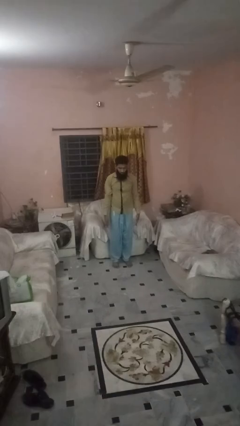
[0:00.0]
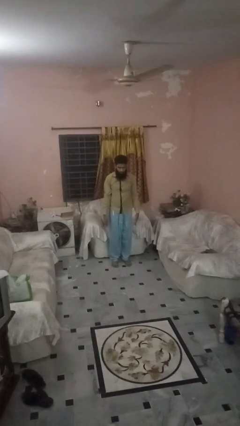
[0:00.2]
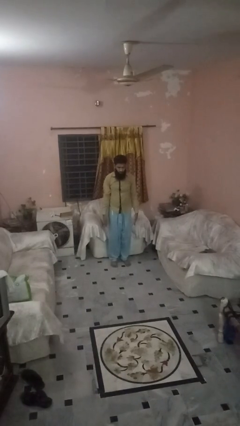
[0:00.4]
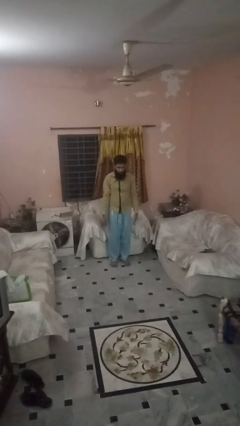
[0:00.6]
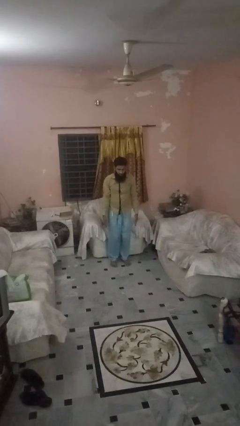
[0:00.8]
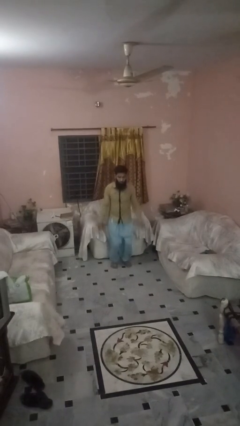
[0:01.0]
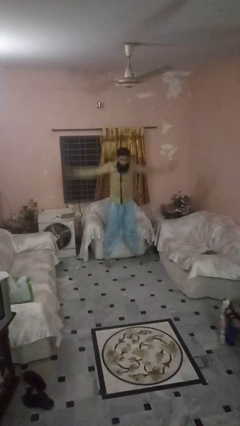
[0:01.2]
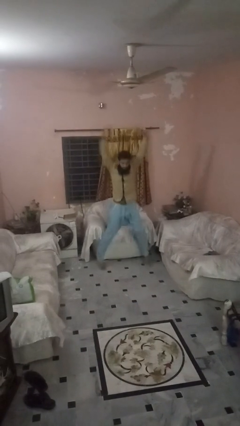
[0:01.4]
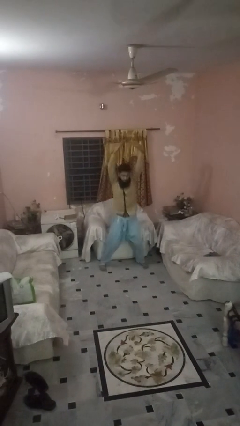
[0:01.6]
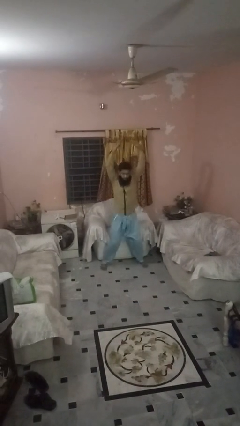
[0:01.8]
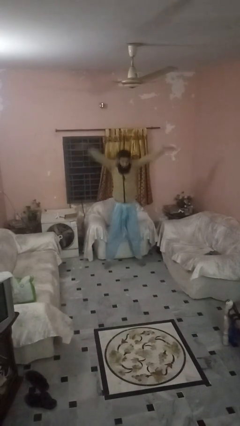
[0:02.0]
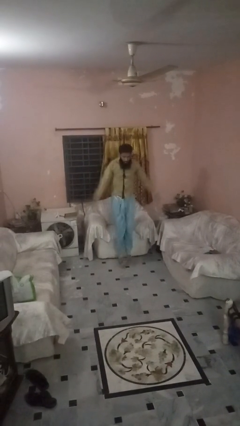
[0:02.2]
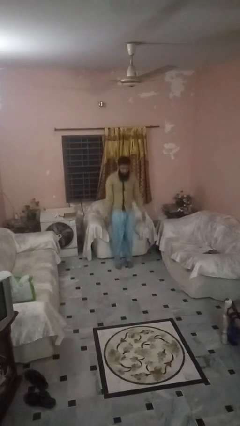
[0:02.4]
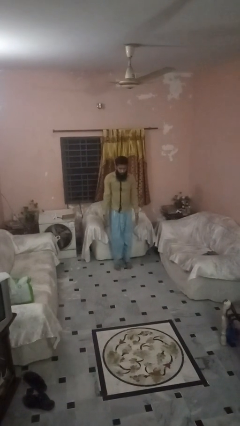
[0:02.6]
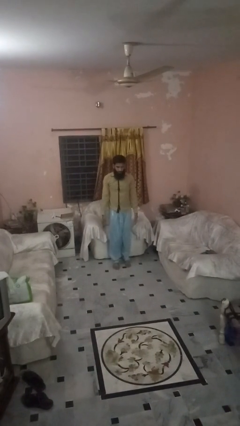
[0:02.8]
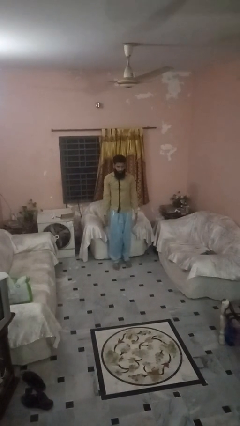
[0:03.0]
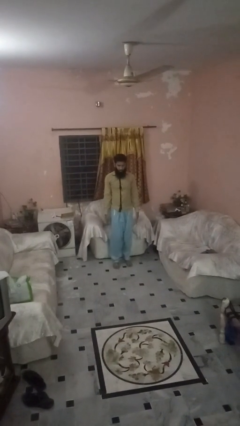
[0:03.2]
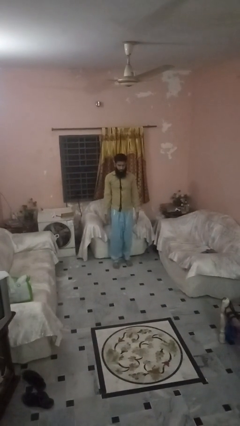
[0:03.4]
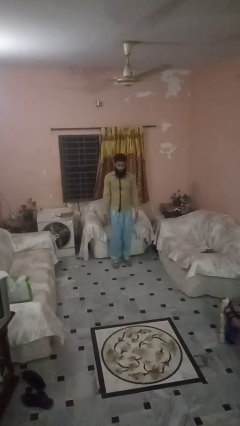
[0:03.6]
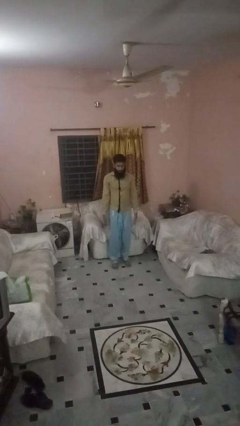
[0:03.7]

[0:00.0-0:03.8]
person exercises with jumping jacks

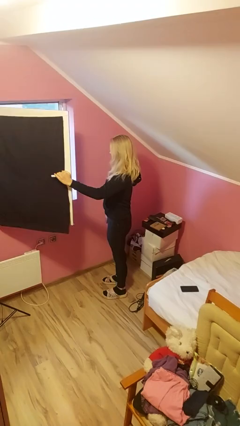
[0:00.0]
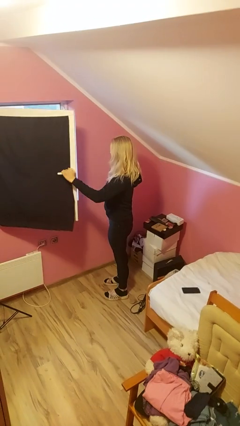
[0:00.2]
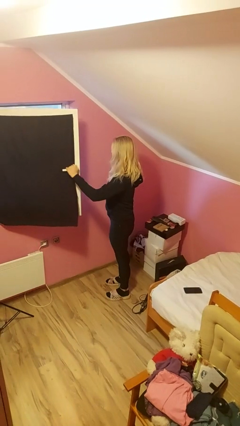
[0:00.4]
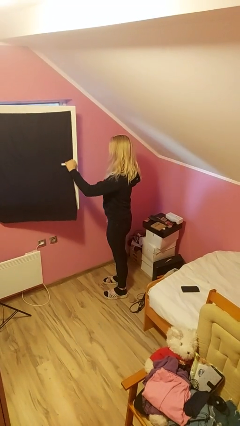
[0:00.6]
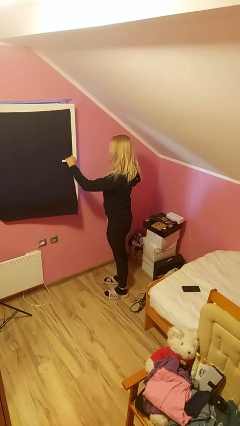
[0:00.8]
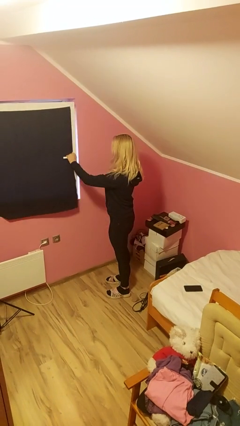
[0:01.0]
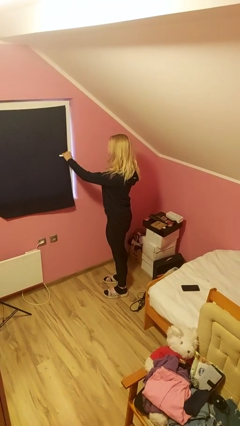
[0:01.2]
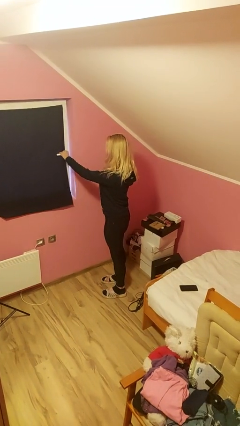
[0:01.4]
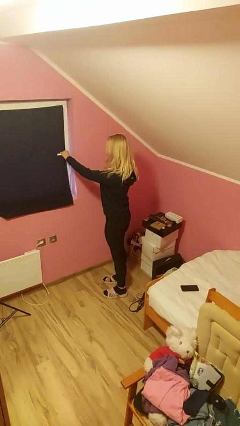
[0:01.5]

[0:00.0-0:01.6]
person closes home window

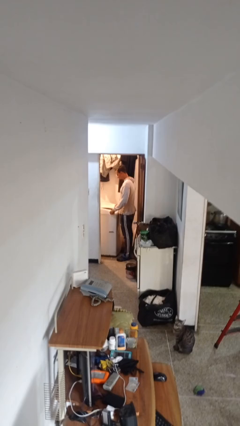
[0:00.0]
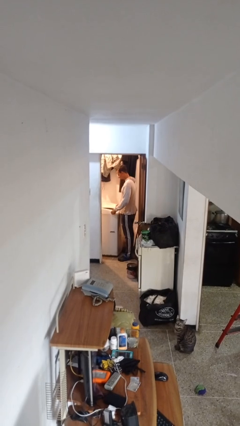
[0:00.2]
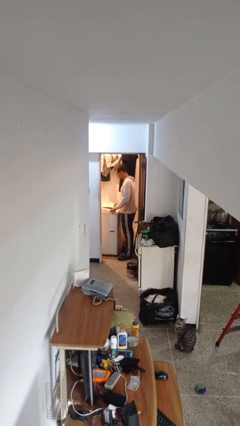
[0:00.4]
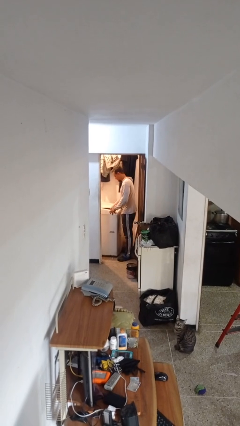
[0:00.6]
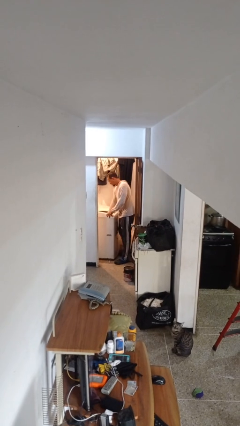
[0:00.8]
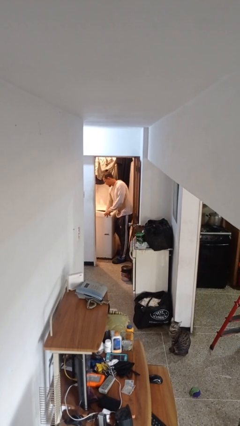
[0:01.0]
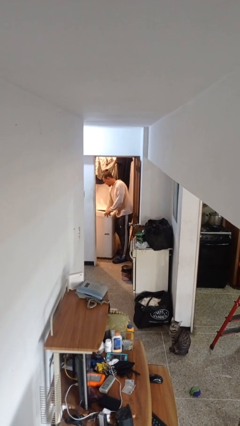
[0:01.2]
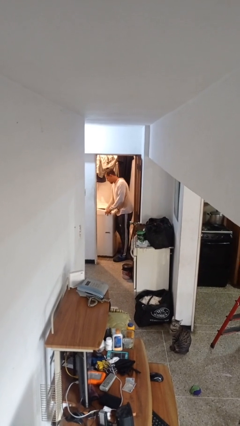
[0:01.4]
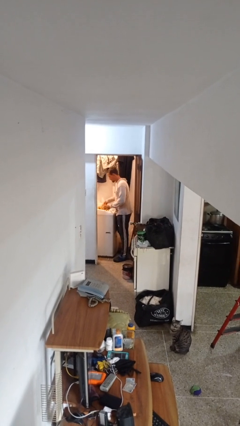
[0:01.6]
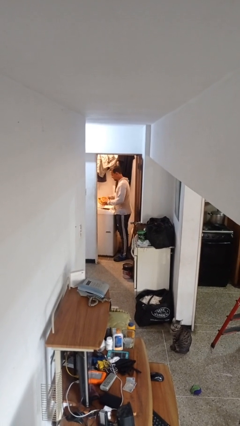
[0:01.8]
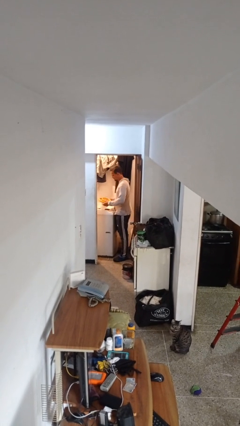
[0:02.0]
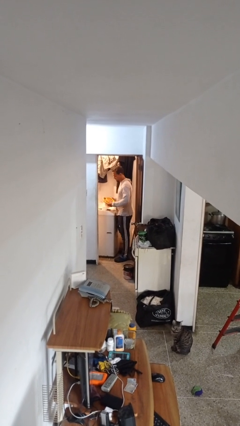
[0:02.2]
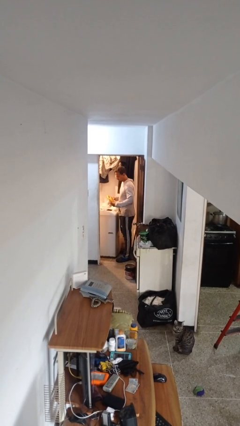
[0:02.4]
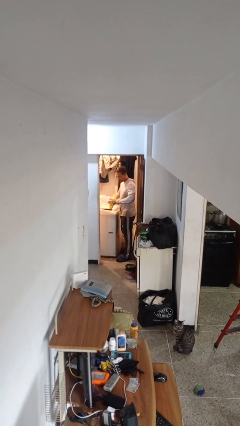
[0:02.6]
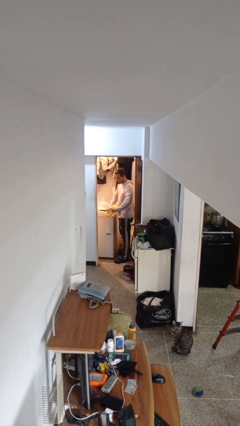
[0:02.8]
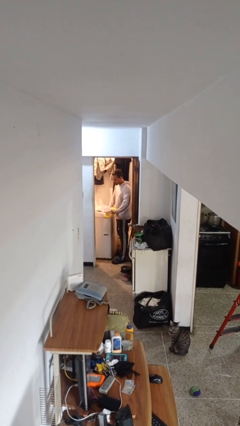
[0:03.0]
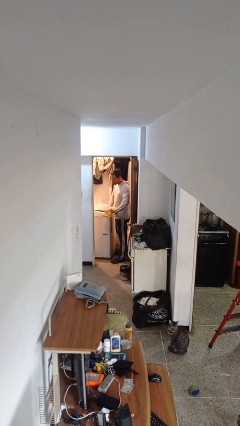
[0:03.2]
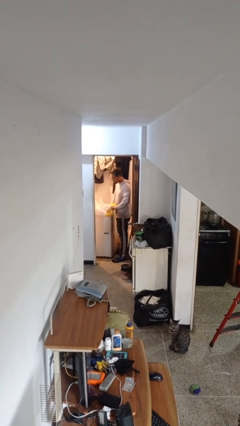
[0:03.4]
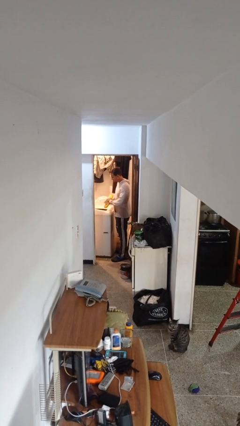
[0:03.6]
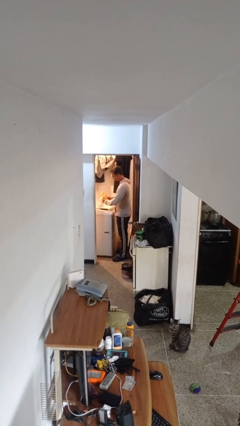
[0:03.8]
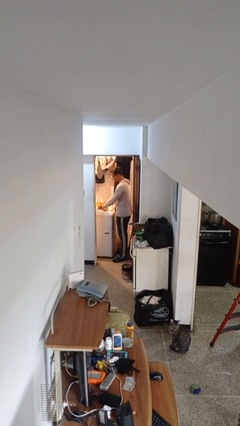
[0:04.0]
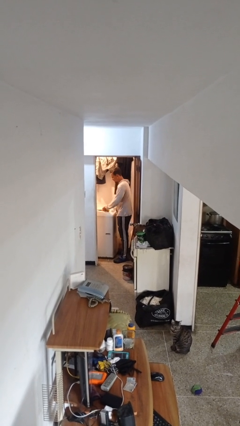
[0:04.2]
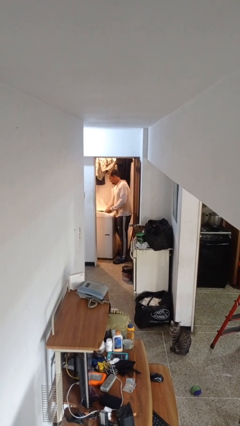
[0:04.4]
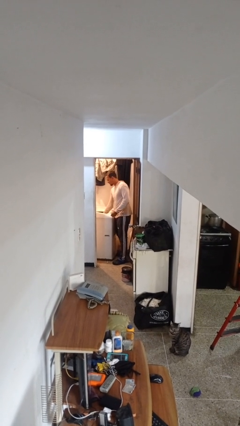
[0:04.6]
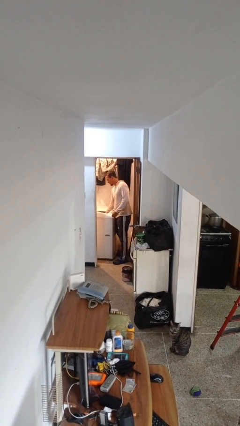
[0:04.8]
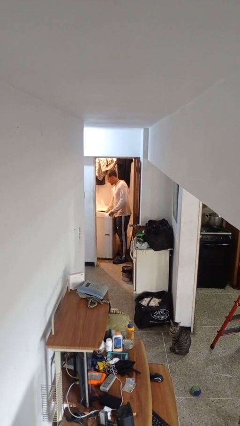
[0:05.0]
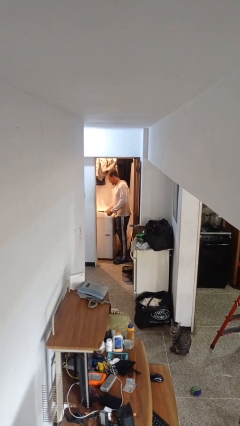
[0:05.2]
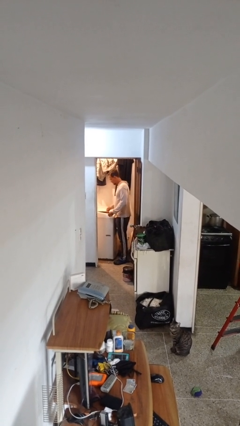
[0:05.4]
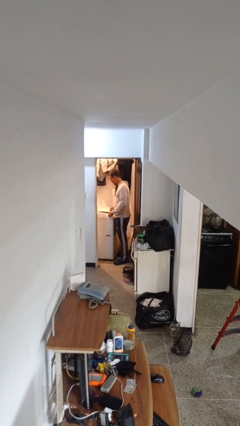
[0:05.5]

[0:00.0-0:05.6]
person cleans dryer lint trap

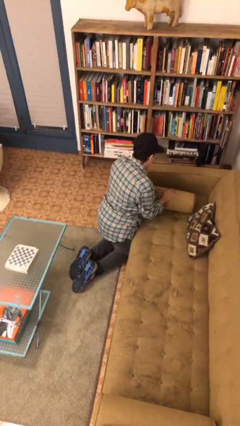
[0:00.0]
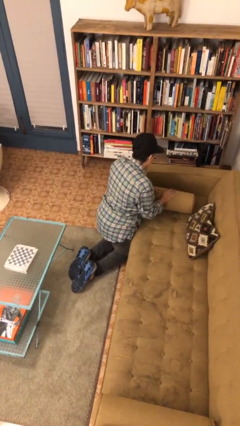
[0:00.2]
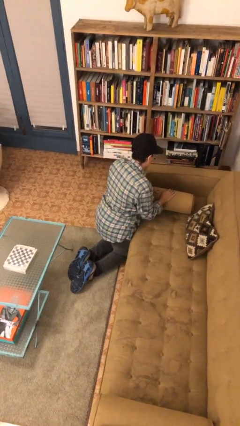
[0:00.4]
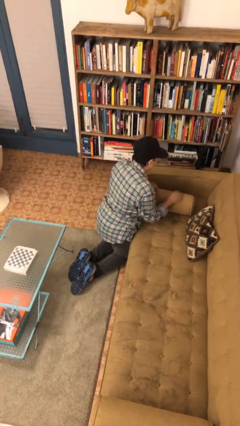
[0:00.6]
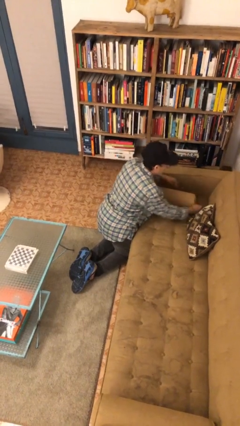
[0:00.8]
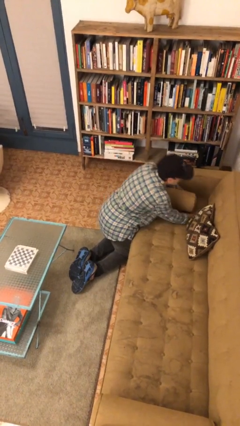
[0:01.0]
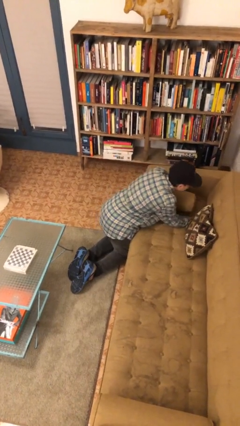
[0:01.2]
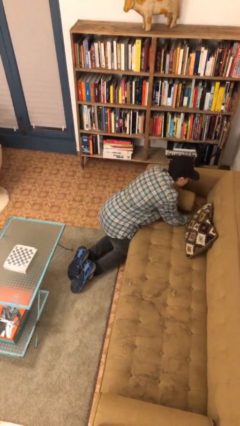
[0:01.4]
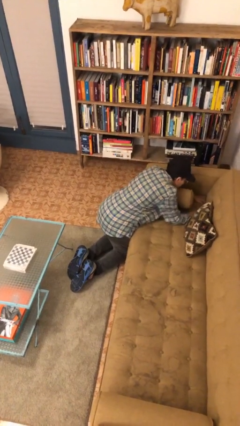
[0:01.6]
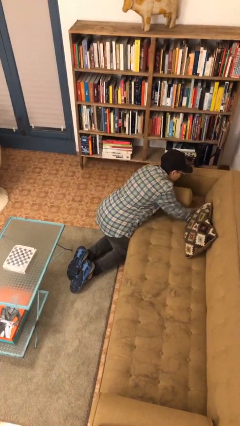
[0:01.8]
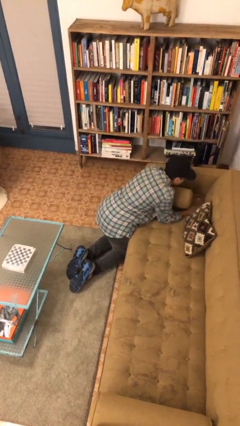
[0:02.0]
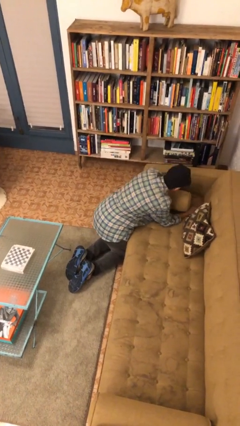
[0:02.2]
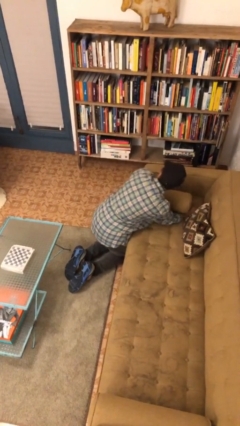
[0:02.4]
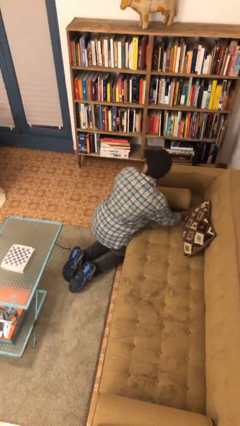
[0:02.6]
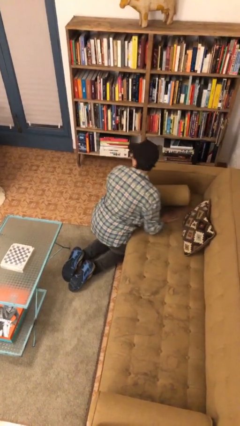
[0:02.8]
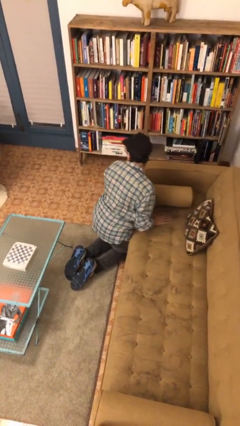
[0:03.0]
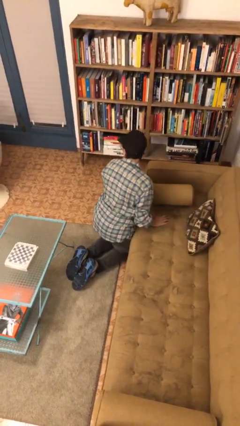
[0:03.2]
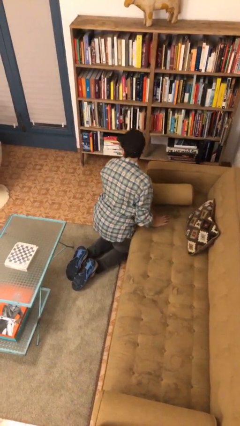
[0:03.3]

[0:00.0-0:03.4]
person searches in couch

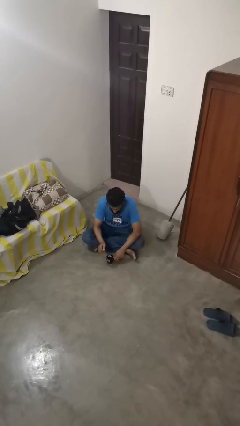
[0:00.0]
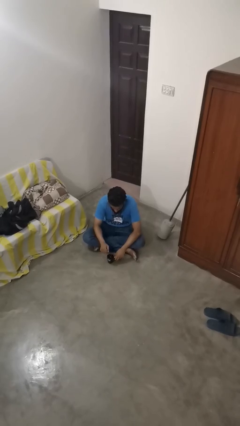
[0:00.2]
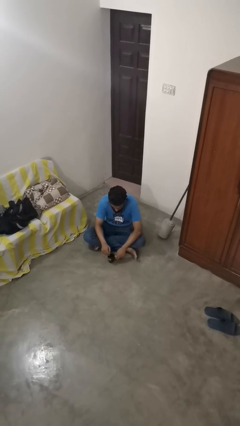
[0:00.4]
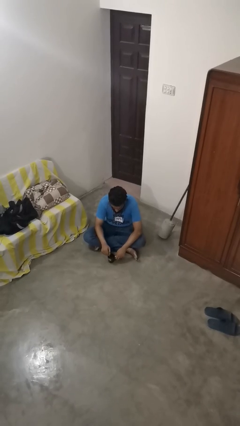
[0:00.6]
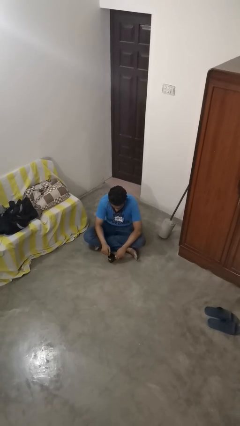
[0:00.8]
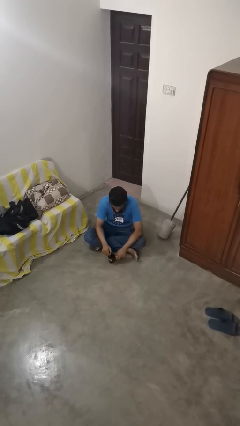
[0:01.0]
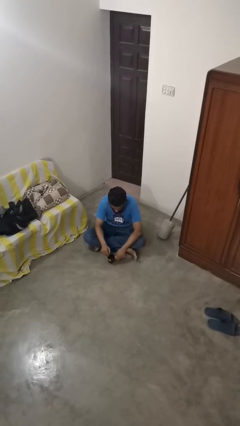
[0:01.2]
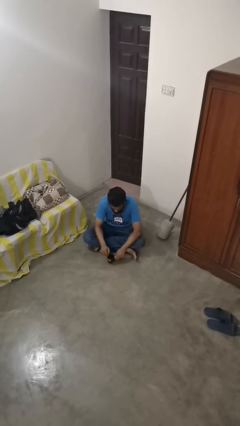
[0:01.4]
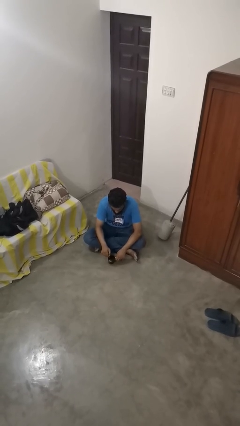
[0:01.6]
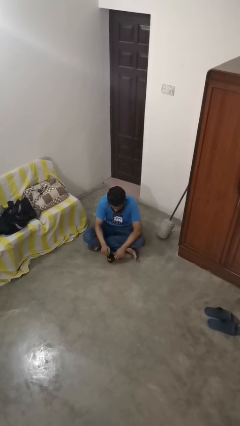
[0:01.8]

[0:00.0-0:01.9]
person stirs mug

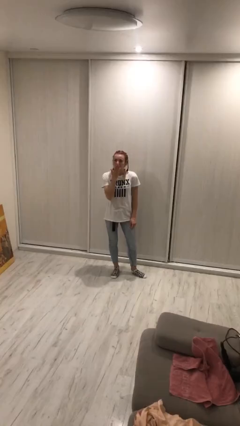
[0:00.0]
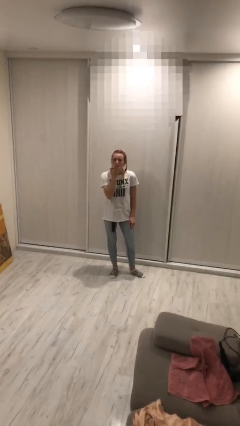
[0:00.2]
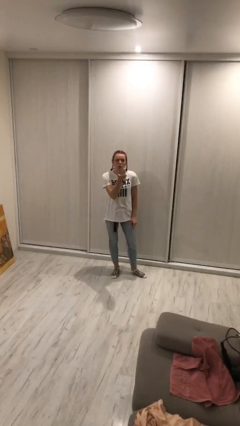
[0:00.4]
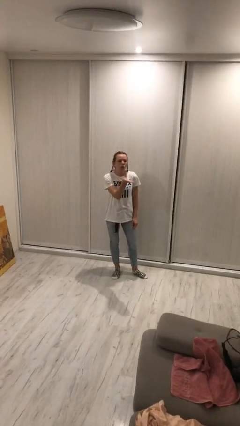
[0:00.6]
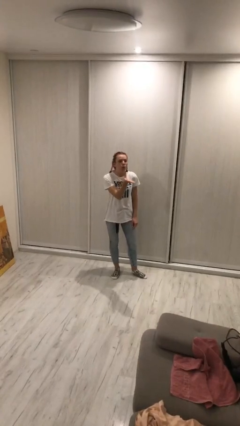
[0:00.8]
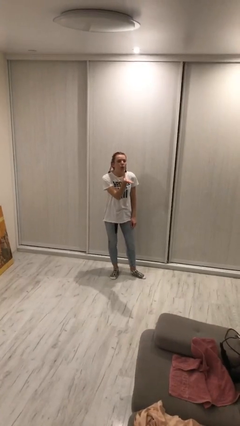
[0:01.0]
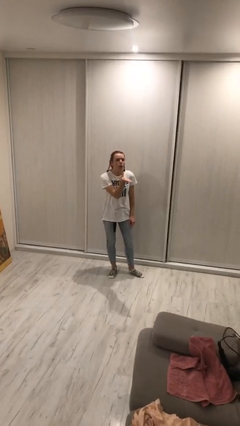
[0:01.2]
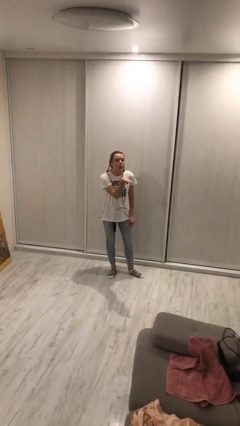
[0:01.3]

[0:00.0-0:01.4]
person gestures blow kiss
